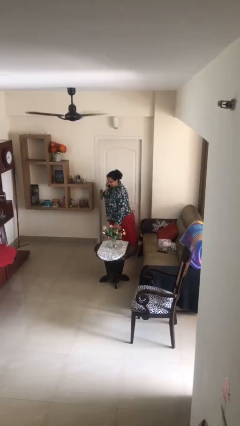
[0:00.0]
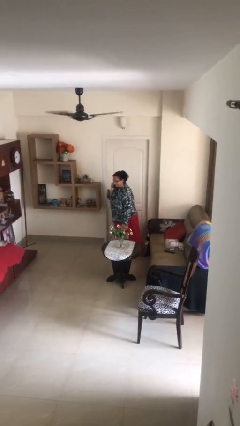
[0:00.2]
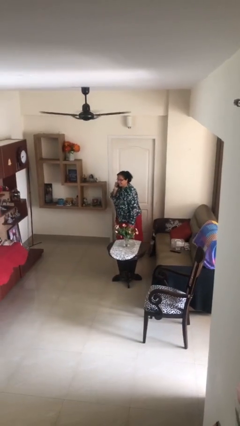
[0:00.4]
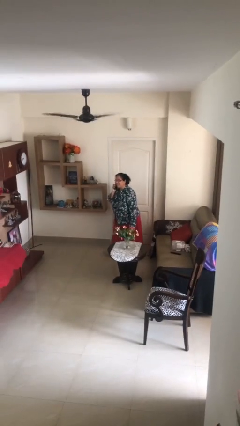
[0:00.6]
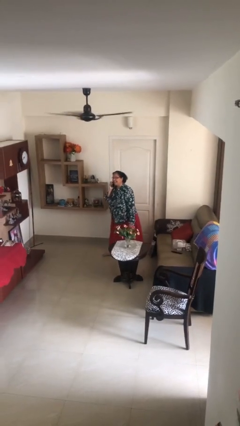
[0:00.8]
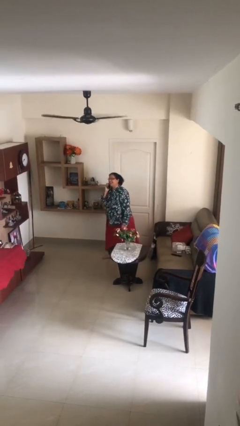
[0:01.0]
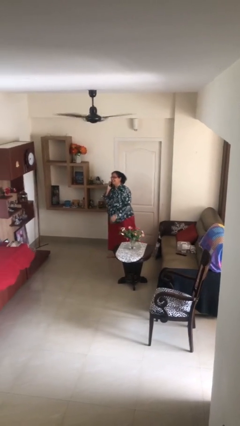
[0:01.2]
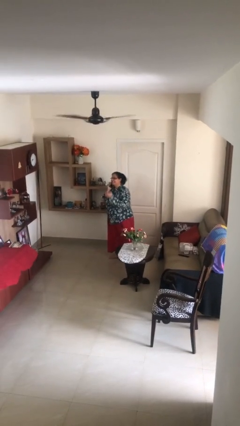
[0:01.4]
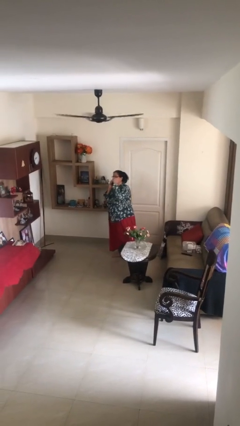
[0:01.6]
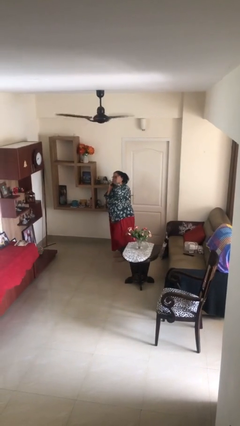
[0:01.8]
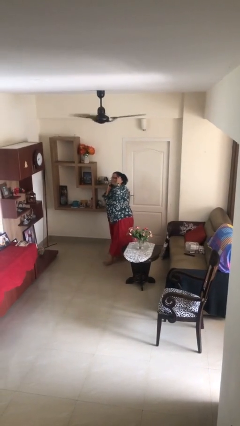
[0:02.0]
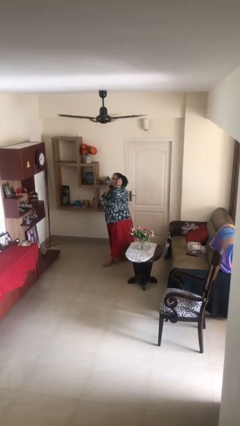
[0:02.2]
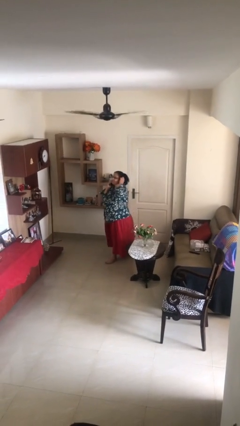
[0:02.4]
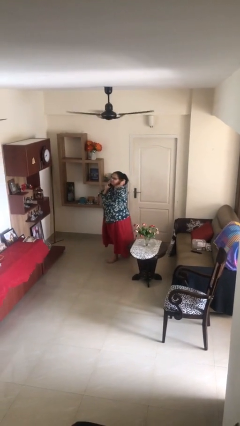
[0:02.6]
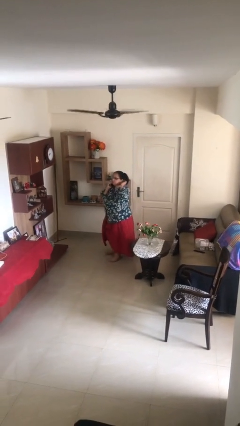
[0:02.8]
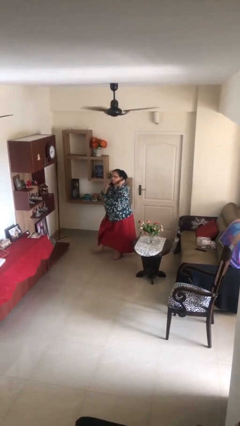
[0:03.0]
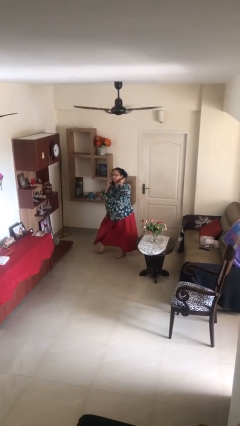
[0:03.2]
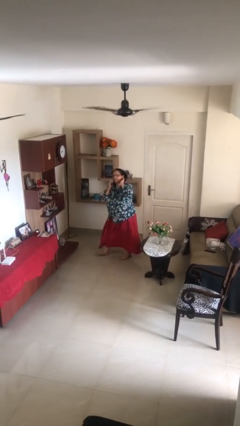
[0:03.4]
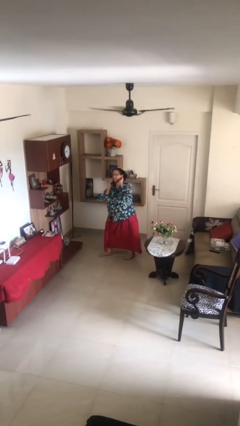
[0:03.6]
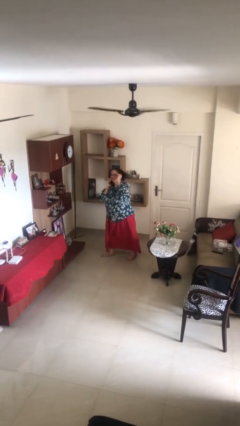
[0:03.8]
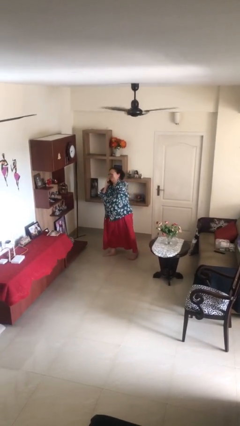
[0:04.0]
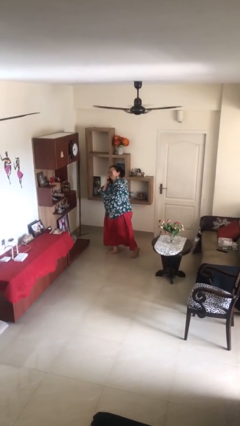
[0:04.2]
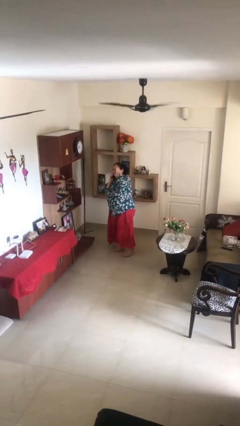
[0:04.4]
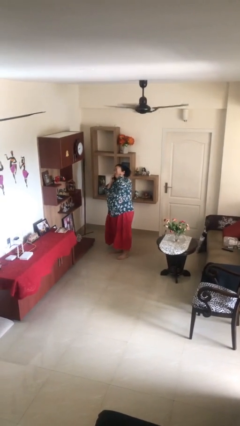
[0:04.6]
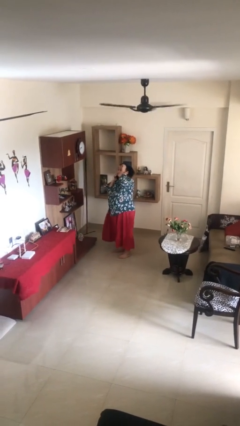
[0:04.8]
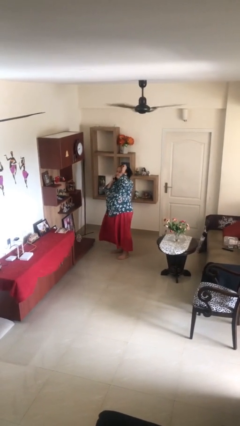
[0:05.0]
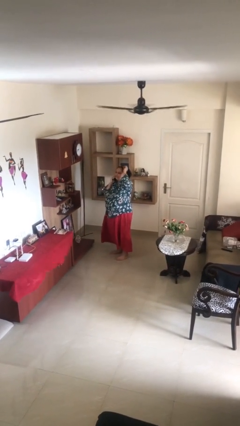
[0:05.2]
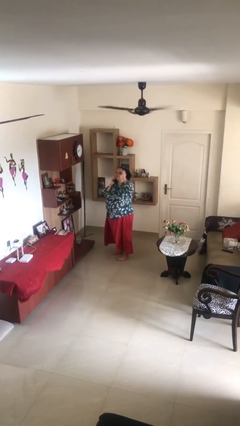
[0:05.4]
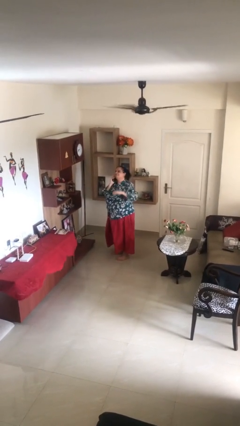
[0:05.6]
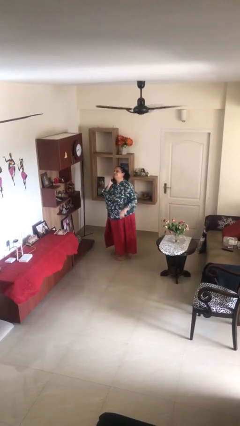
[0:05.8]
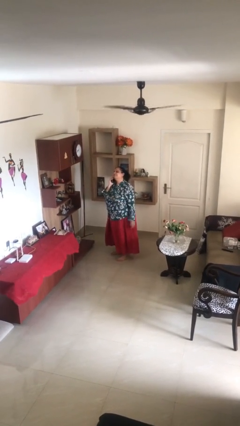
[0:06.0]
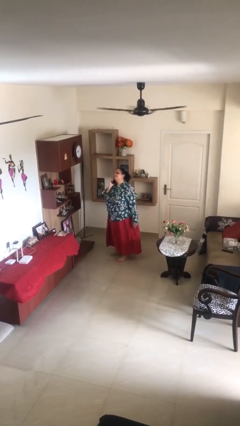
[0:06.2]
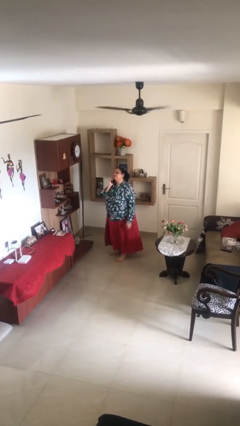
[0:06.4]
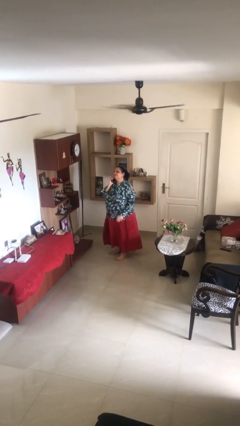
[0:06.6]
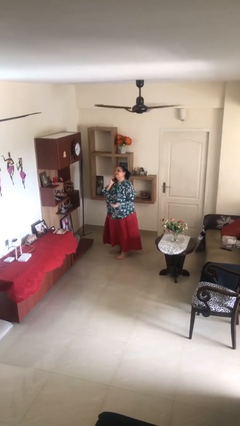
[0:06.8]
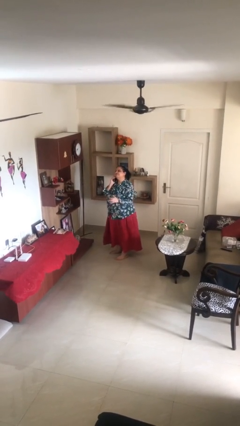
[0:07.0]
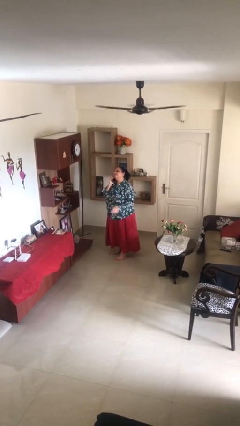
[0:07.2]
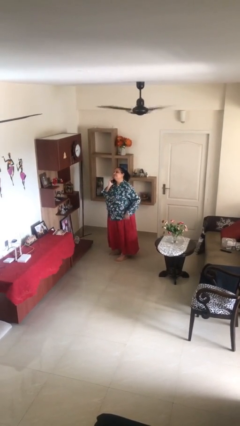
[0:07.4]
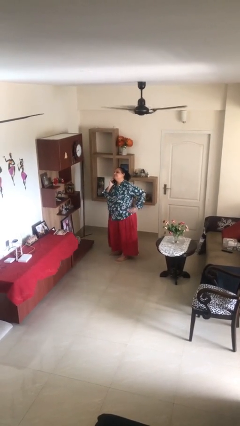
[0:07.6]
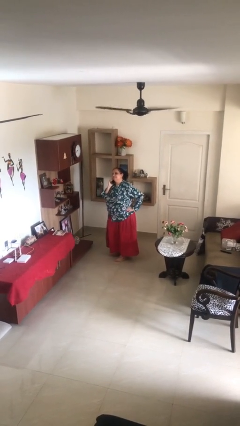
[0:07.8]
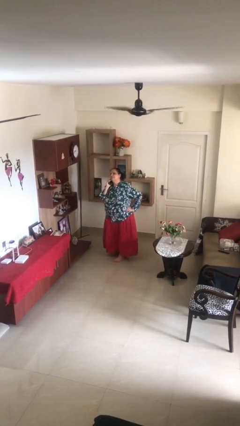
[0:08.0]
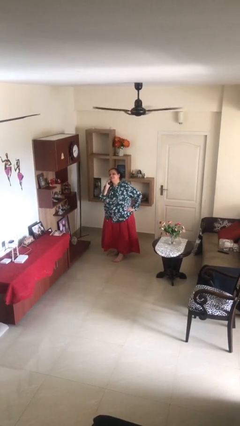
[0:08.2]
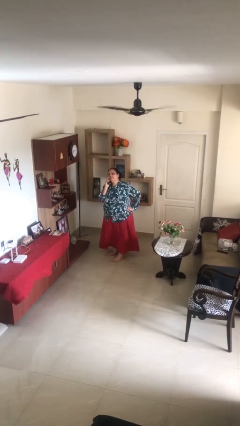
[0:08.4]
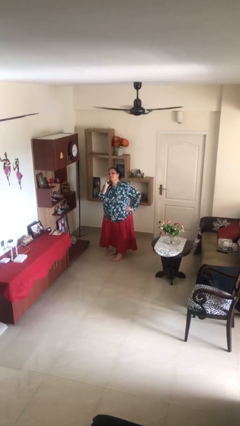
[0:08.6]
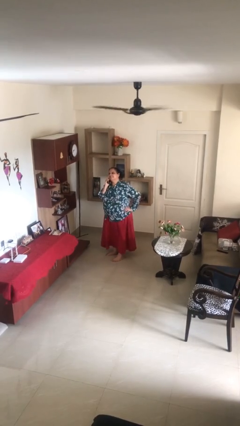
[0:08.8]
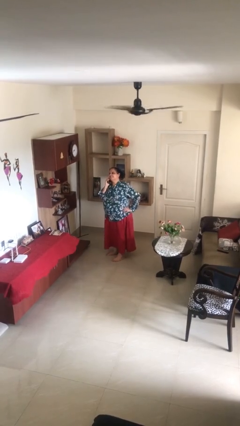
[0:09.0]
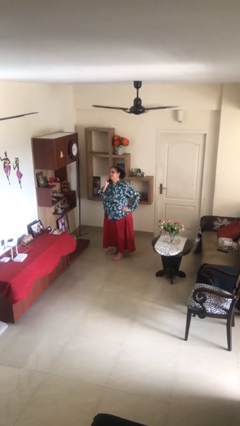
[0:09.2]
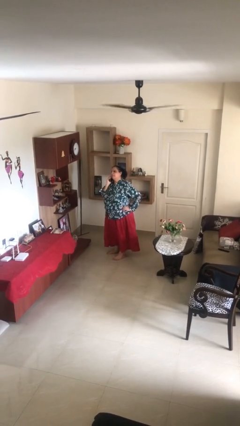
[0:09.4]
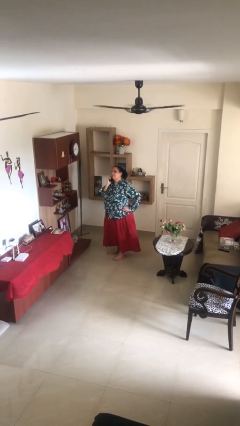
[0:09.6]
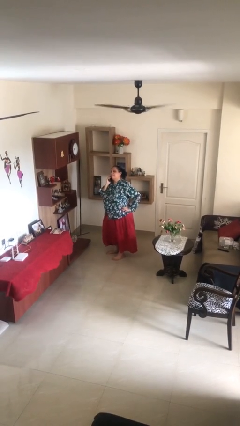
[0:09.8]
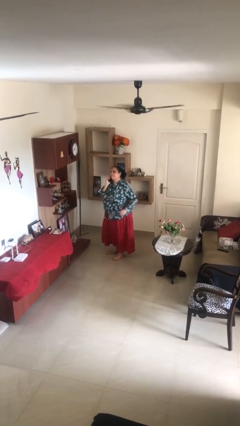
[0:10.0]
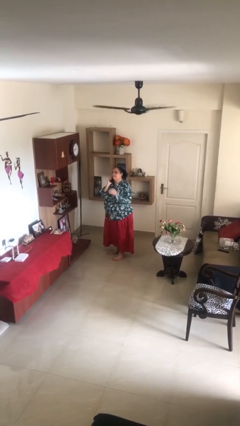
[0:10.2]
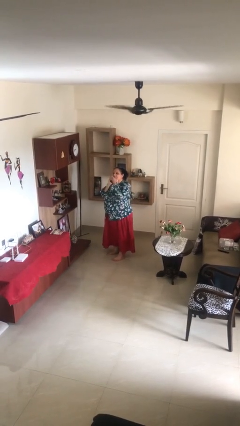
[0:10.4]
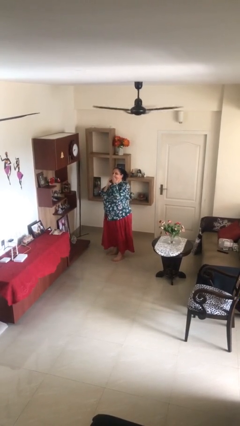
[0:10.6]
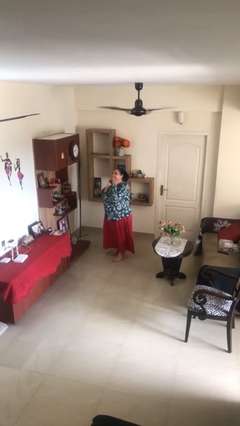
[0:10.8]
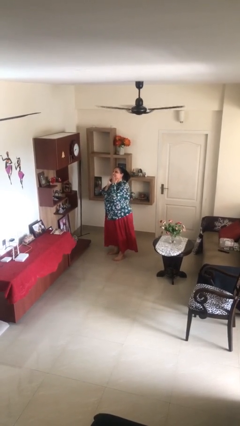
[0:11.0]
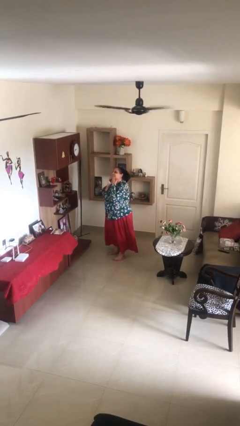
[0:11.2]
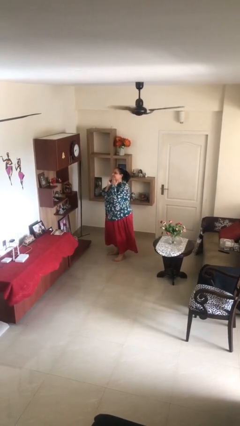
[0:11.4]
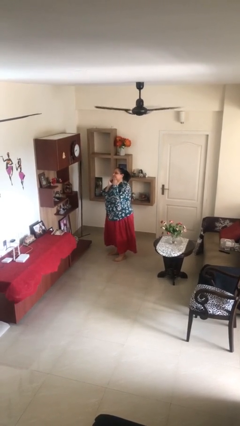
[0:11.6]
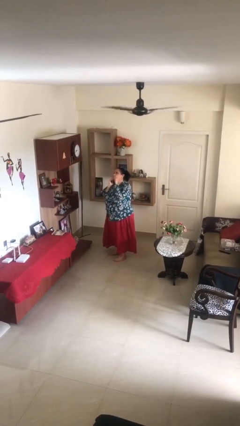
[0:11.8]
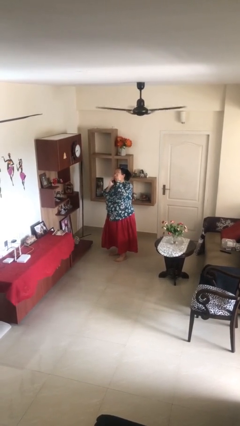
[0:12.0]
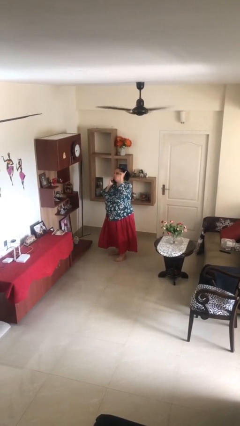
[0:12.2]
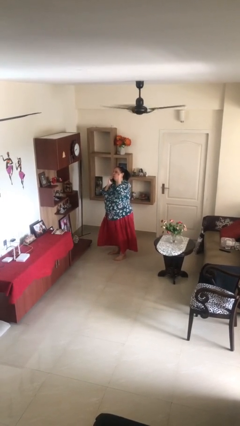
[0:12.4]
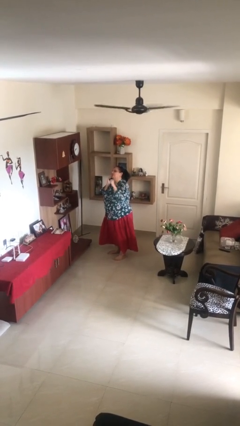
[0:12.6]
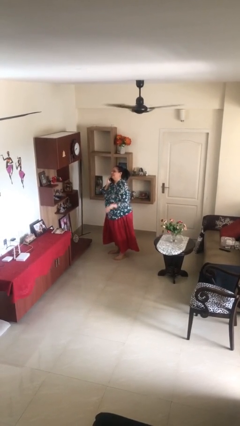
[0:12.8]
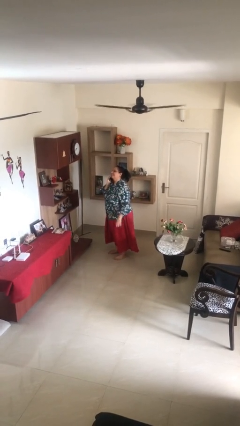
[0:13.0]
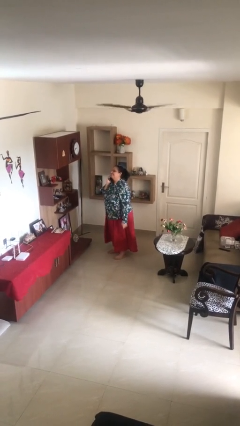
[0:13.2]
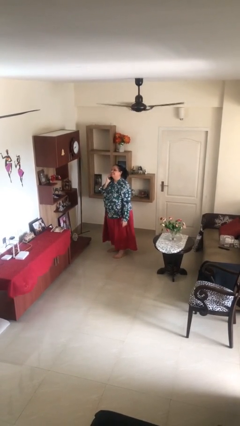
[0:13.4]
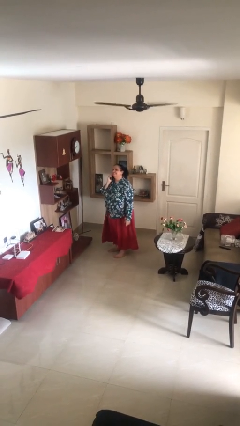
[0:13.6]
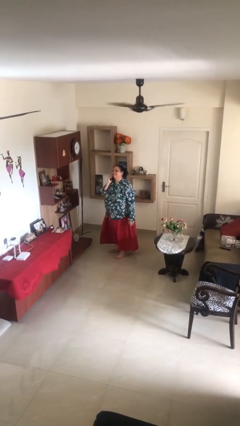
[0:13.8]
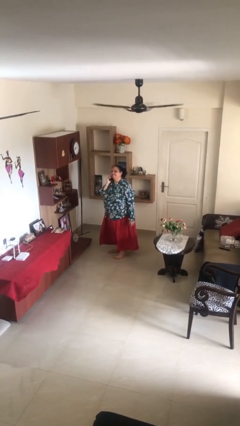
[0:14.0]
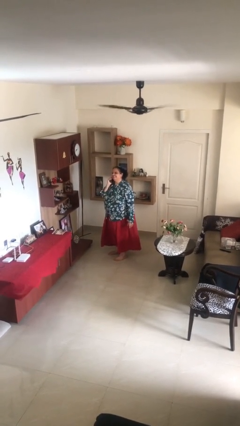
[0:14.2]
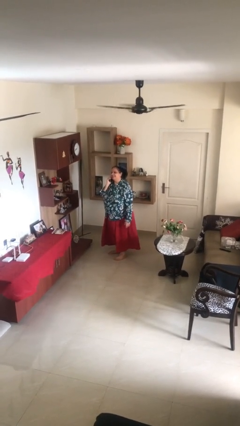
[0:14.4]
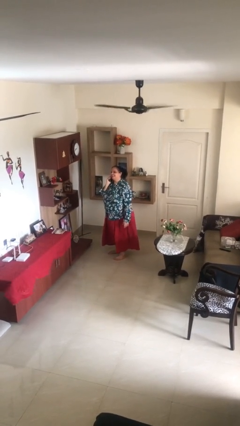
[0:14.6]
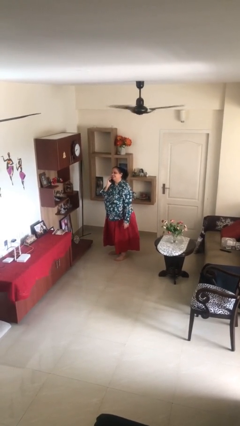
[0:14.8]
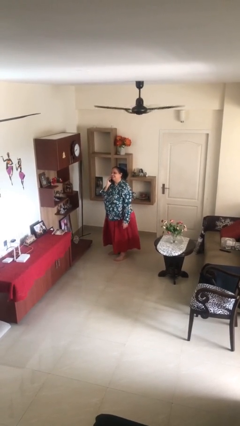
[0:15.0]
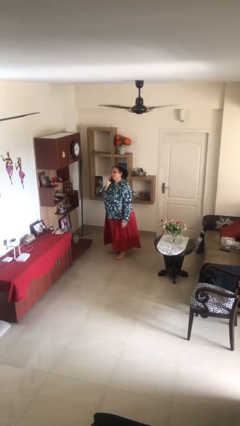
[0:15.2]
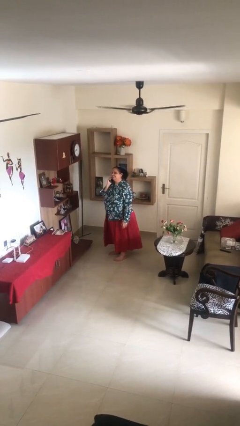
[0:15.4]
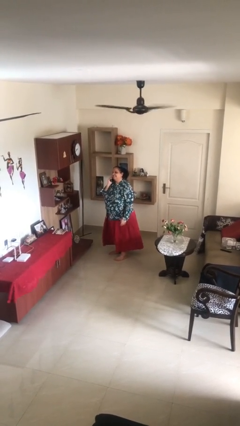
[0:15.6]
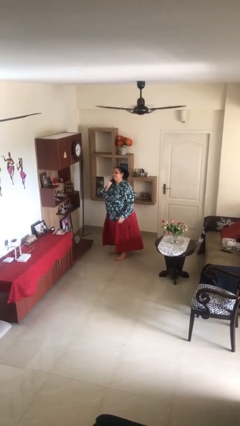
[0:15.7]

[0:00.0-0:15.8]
person talks on phone

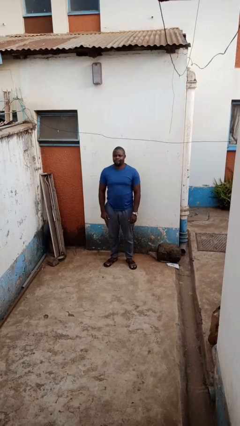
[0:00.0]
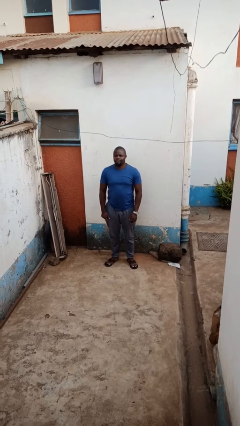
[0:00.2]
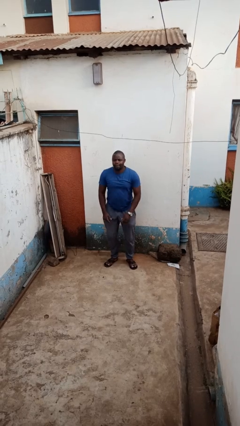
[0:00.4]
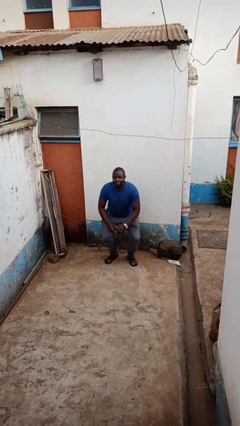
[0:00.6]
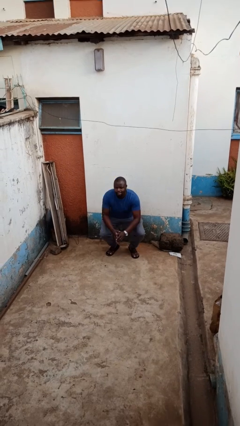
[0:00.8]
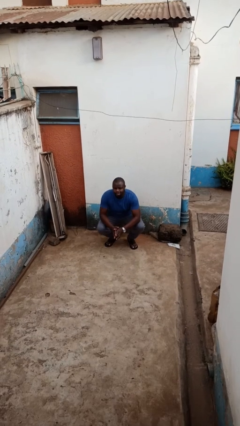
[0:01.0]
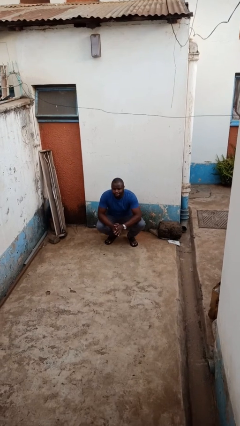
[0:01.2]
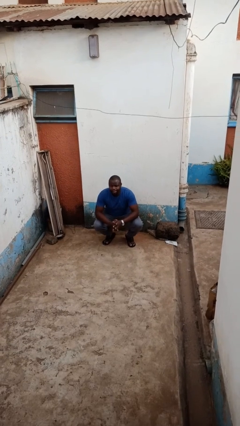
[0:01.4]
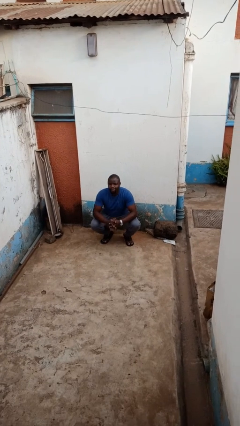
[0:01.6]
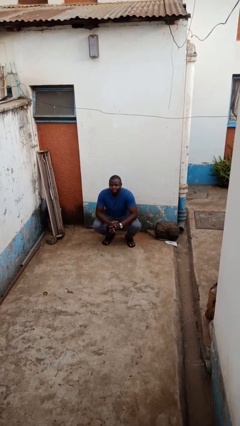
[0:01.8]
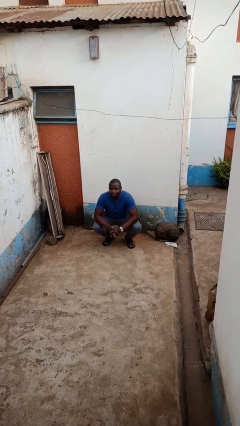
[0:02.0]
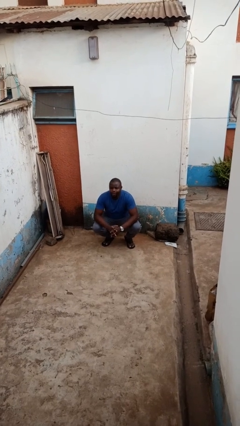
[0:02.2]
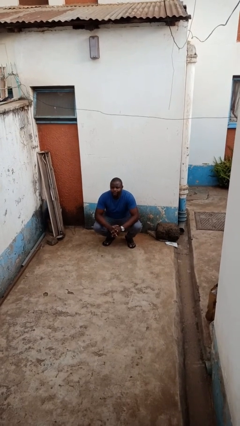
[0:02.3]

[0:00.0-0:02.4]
person squats
